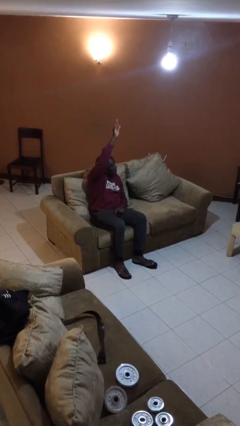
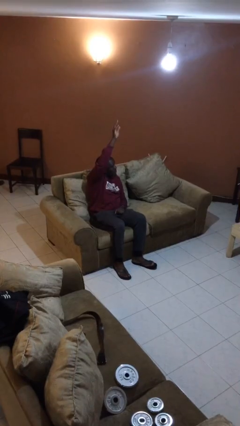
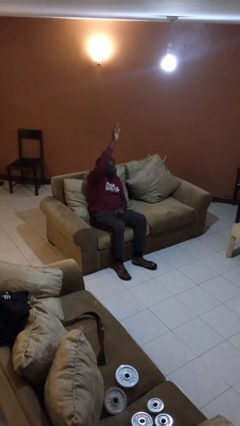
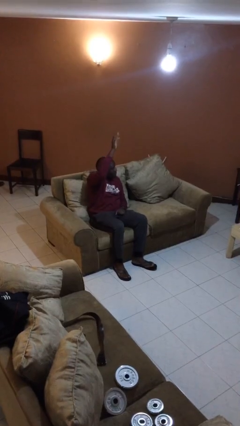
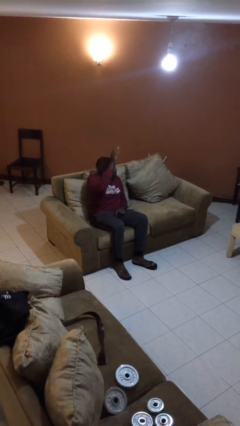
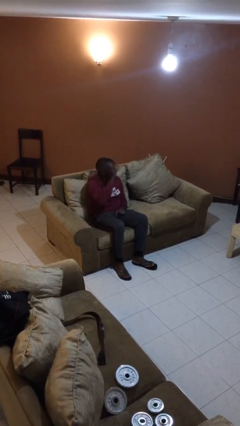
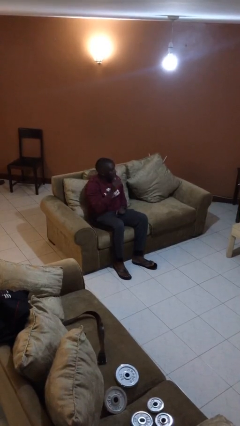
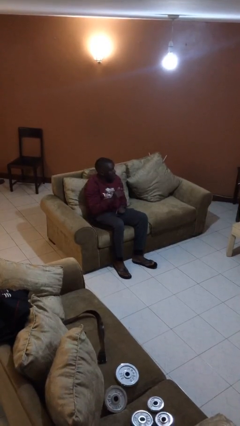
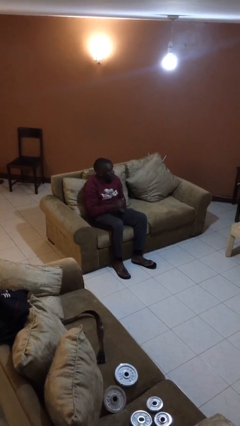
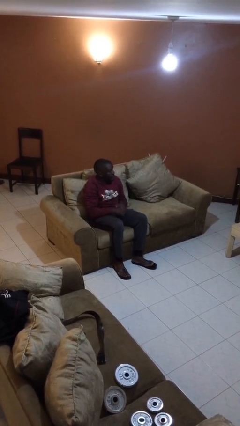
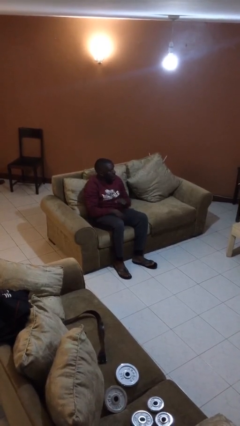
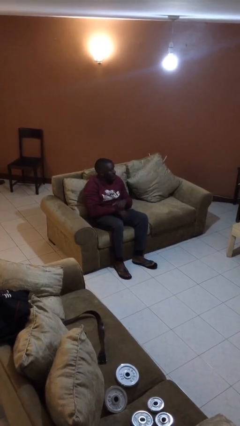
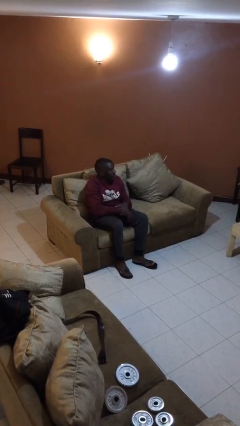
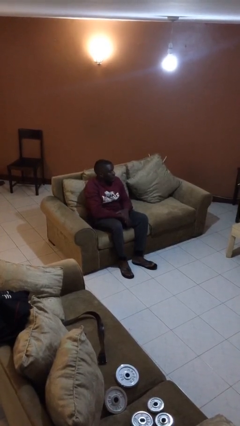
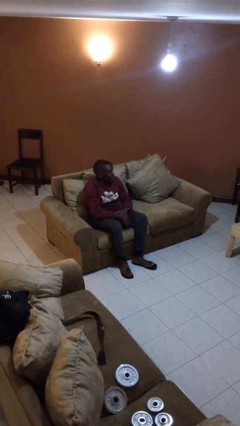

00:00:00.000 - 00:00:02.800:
person gestures lower hand

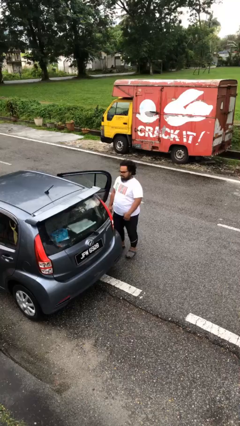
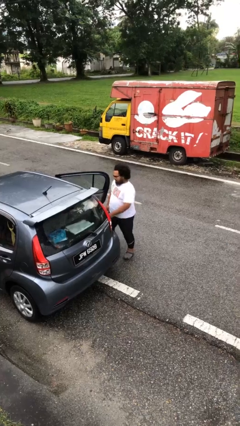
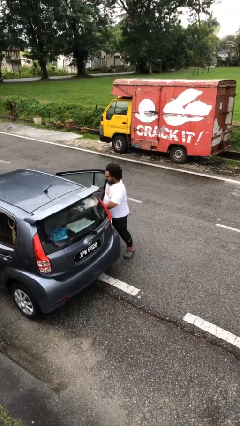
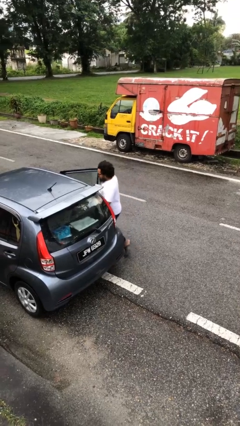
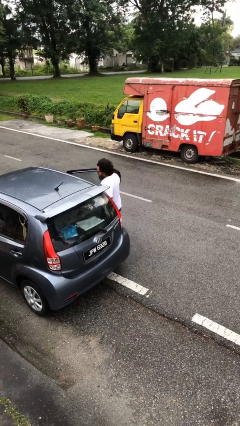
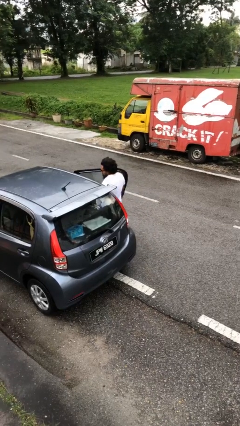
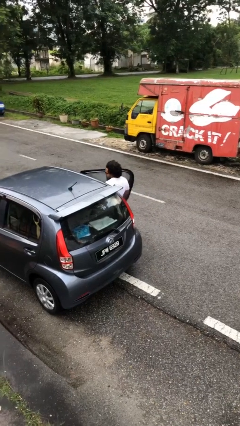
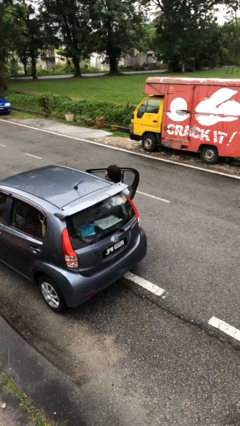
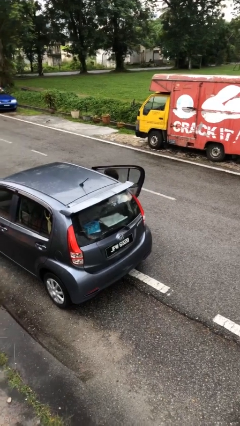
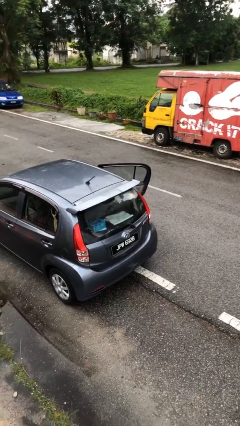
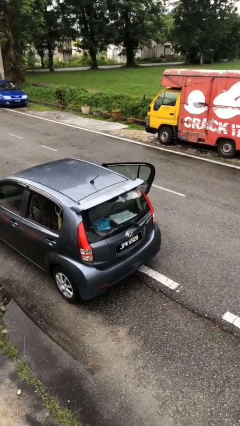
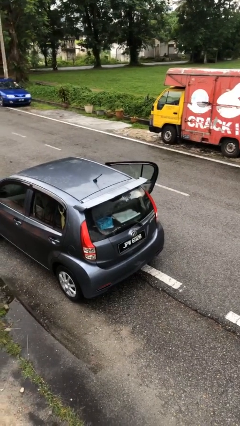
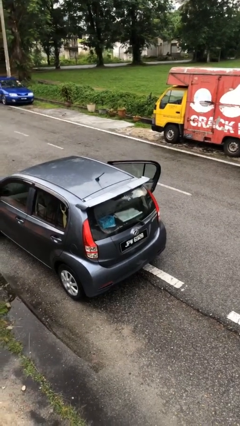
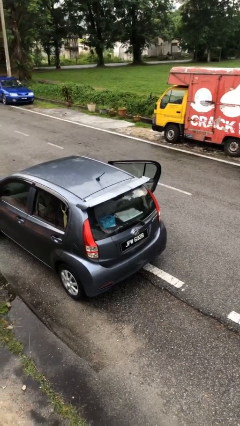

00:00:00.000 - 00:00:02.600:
person enters car

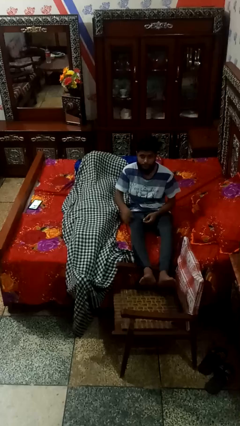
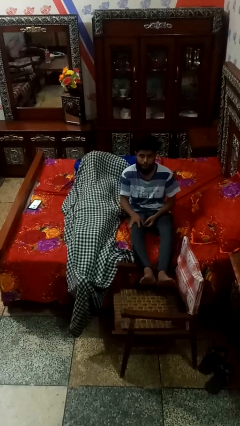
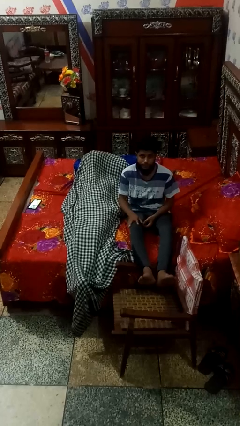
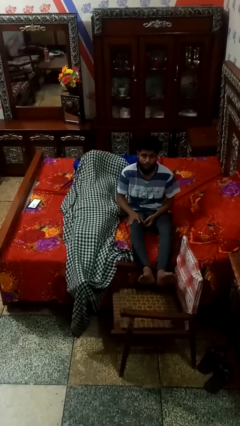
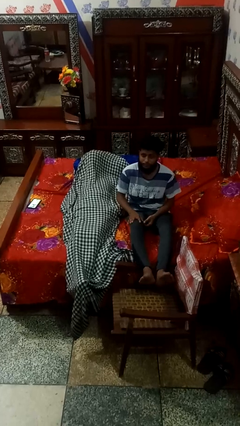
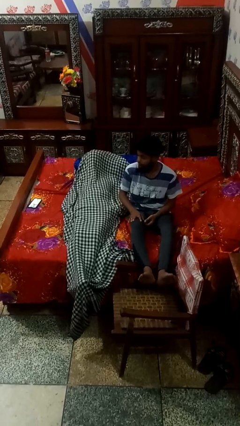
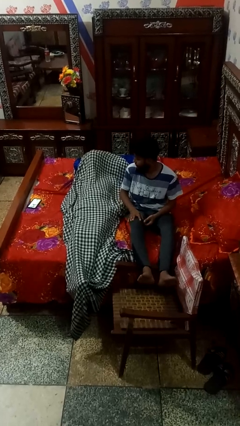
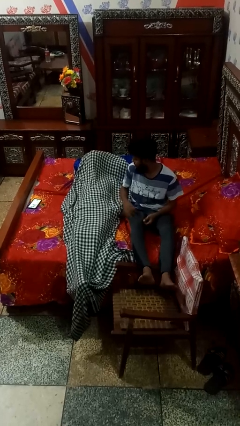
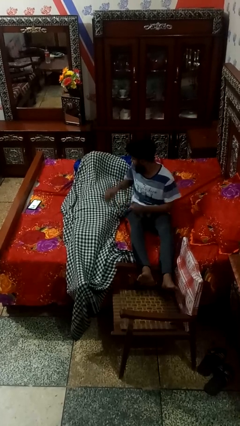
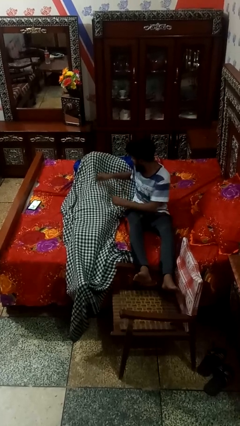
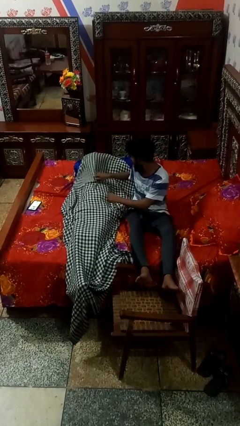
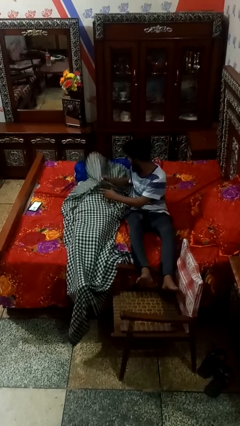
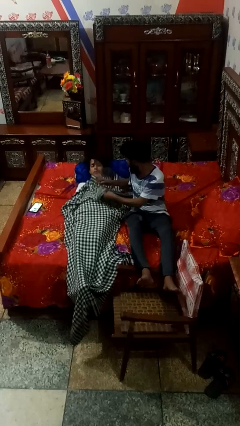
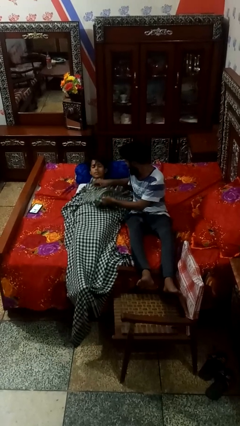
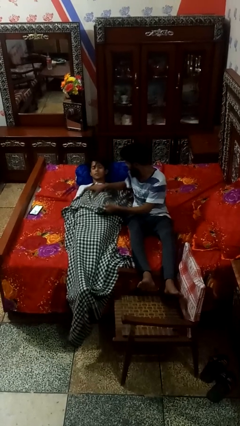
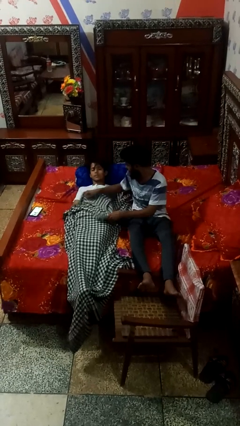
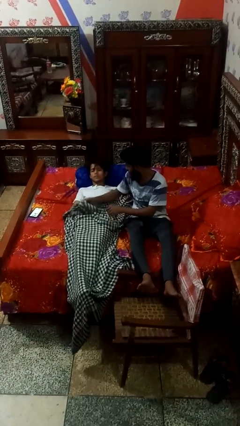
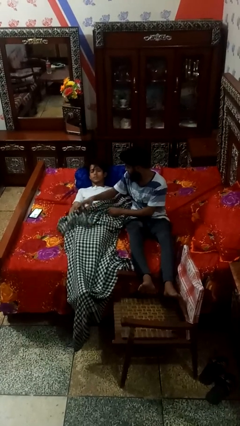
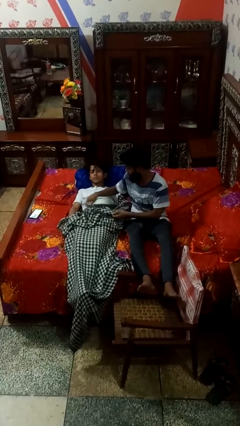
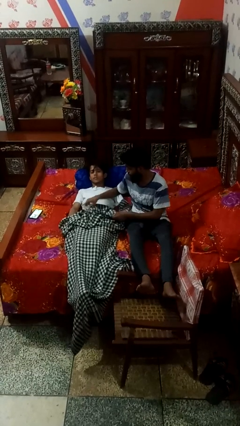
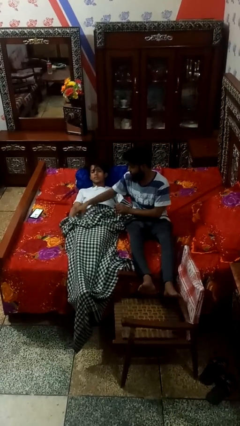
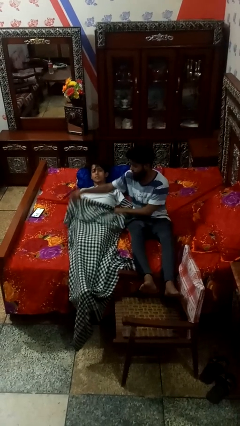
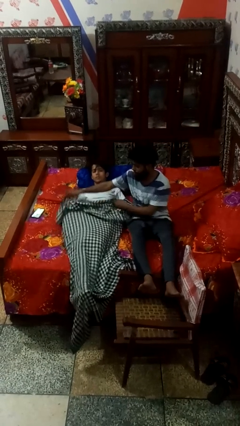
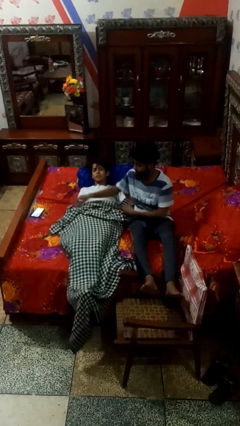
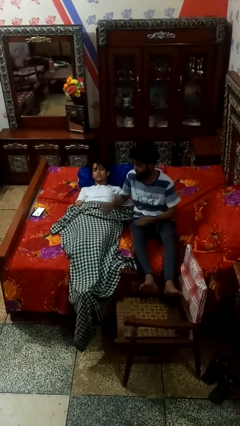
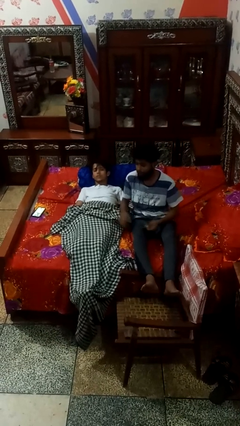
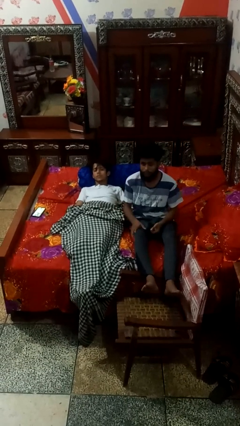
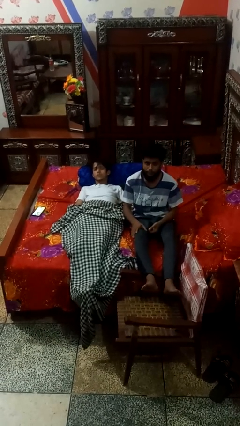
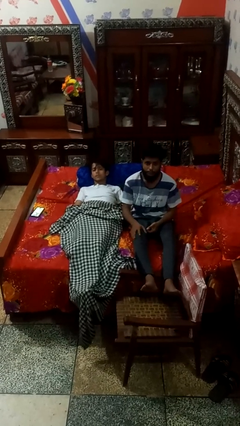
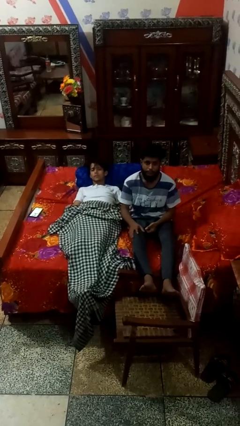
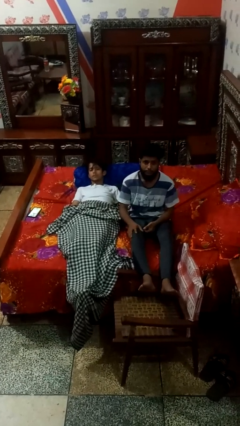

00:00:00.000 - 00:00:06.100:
person uncovers friend with blanket

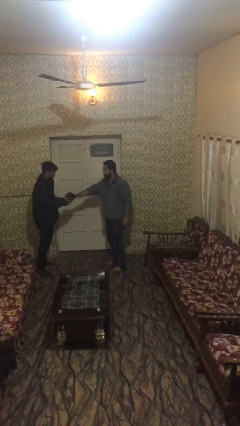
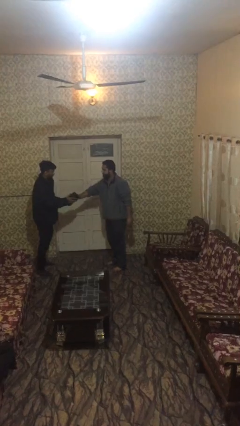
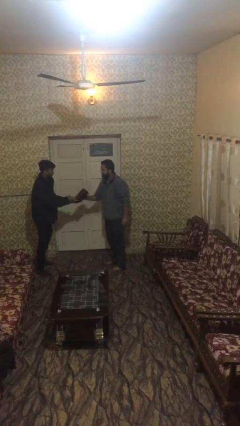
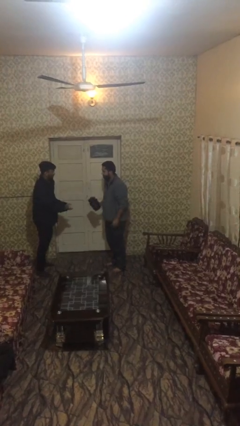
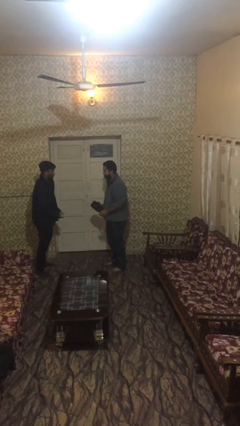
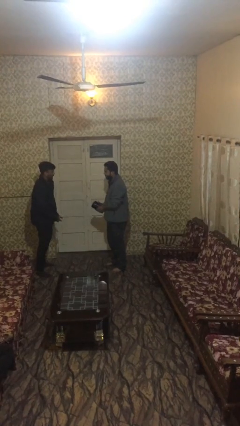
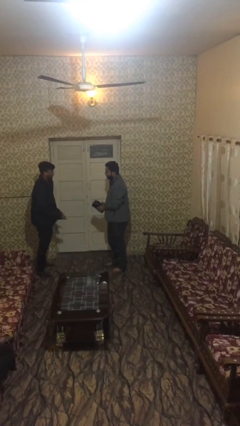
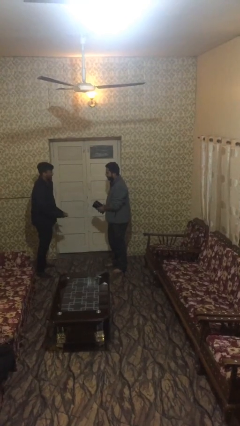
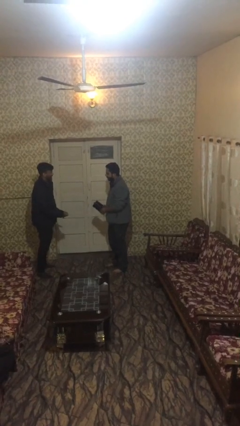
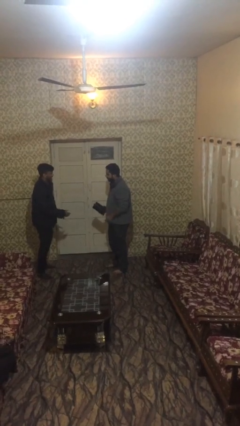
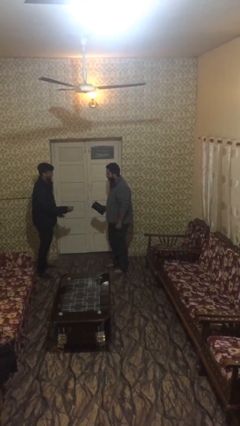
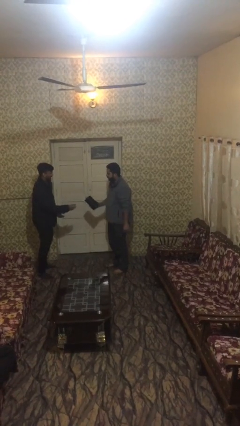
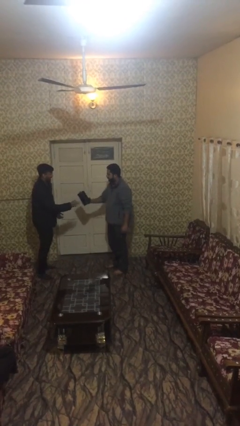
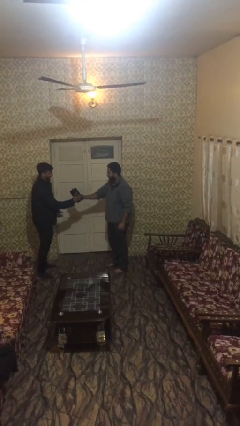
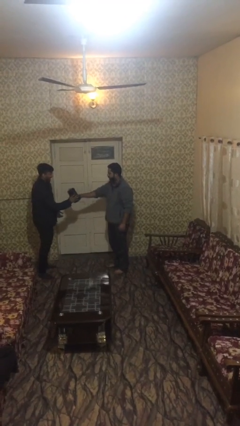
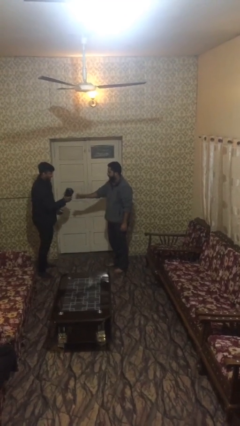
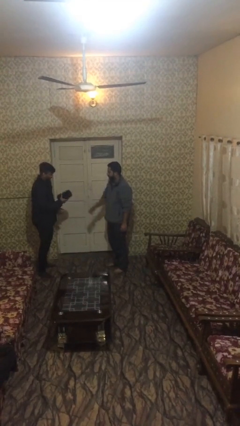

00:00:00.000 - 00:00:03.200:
person transfers object to person

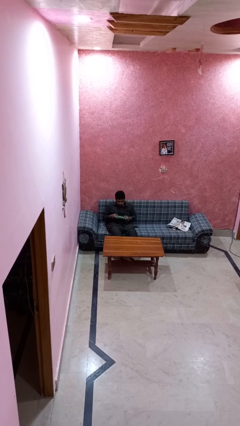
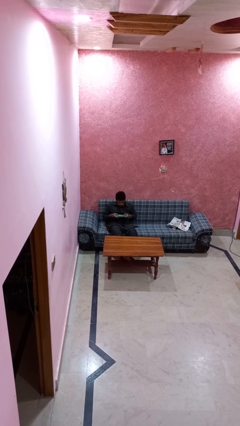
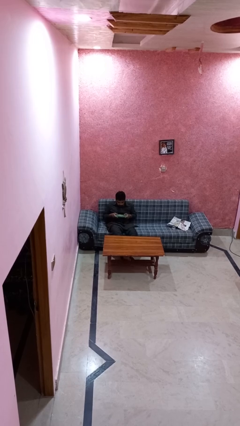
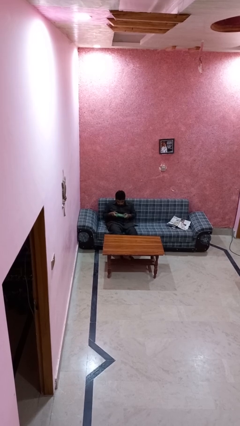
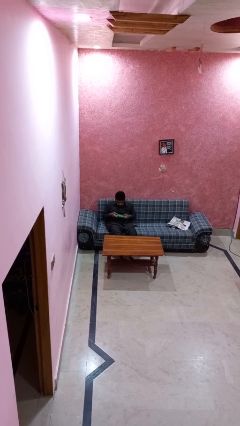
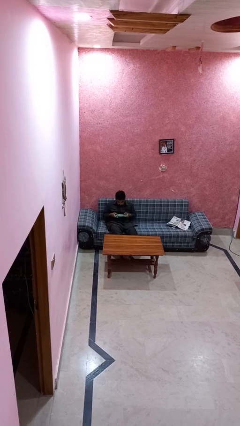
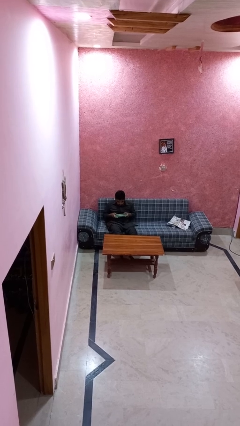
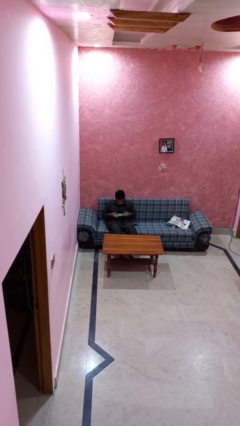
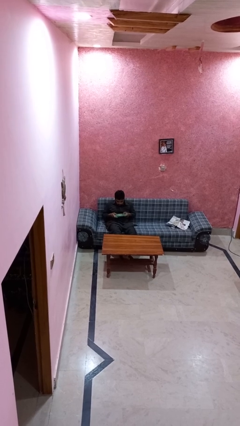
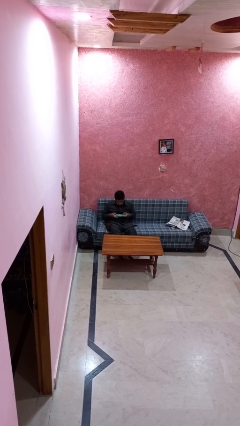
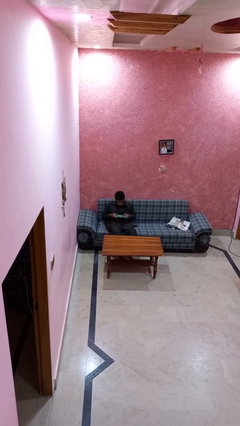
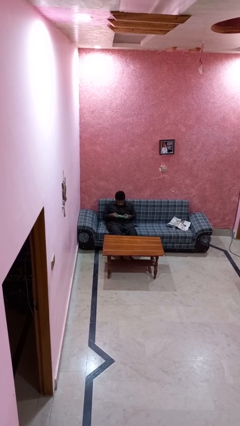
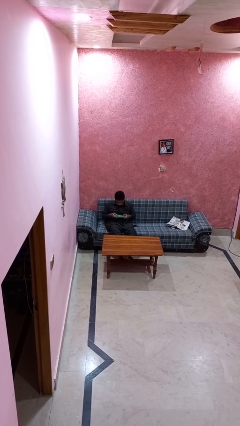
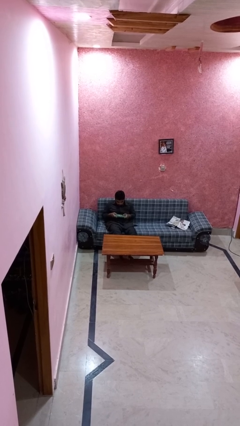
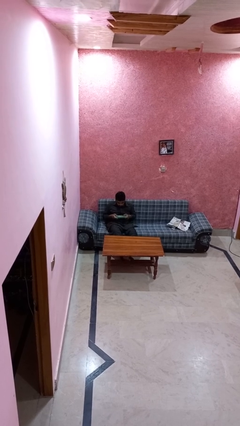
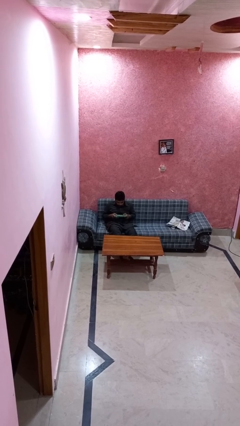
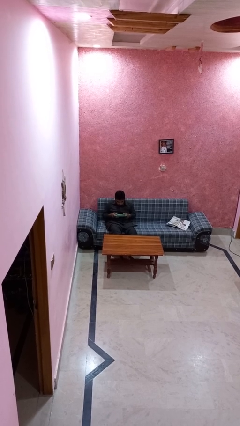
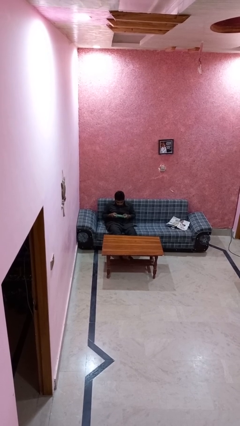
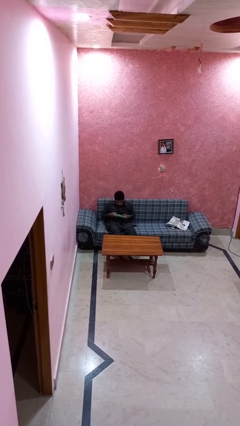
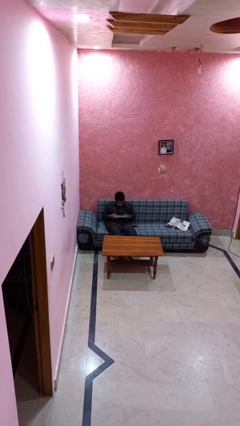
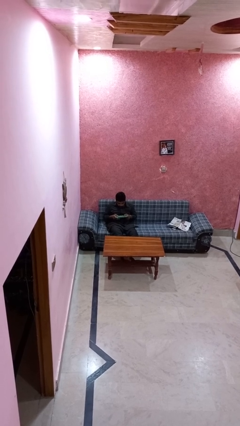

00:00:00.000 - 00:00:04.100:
person interacts with handheld game
